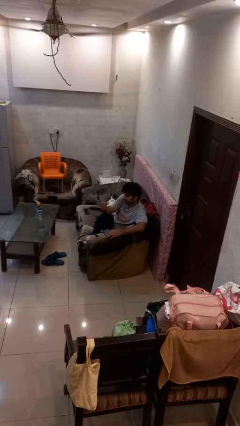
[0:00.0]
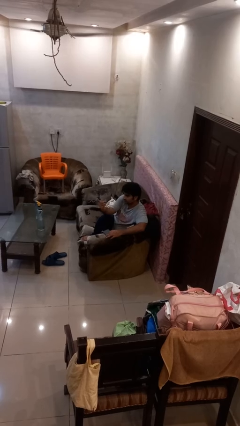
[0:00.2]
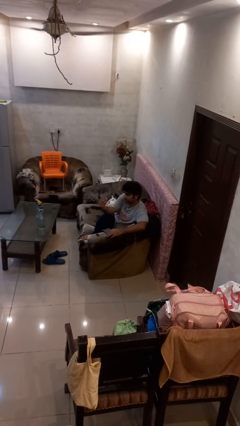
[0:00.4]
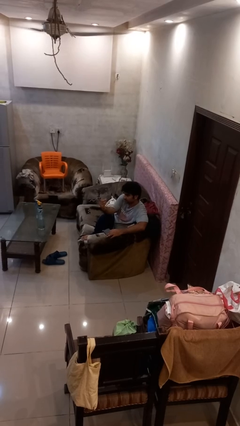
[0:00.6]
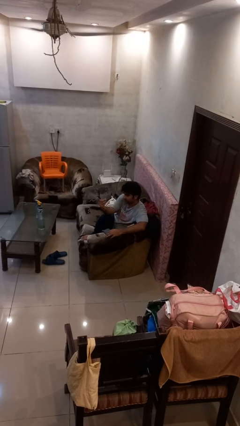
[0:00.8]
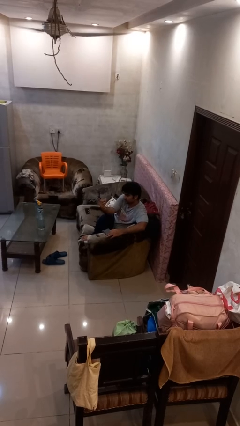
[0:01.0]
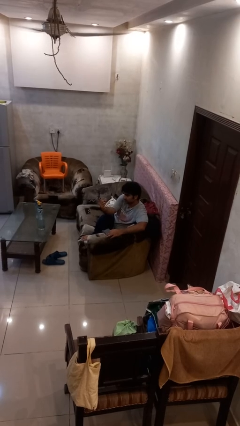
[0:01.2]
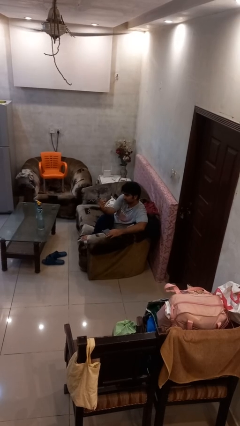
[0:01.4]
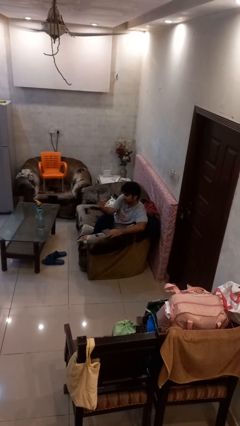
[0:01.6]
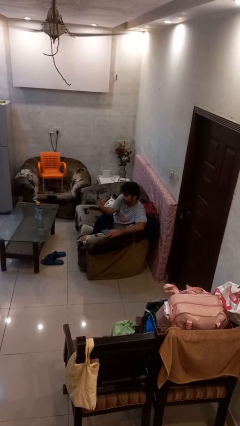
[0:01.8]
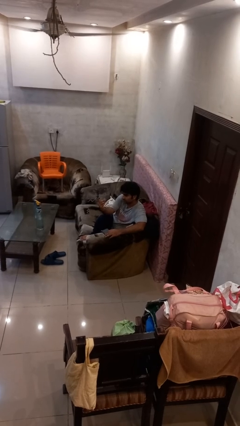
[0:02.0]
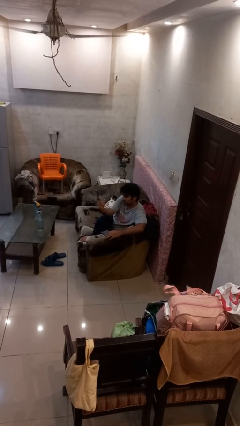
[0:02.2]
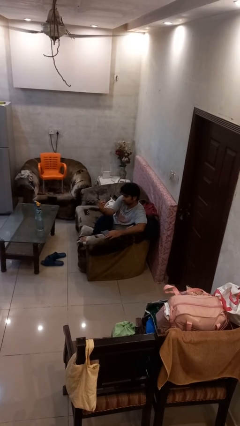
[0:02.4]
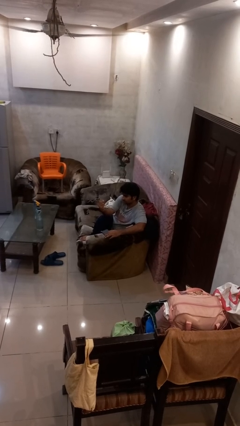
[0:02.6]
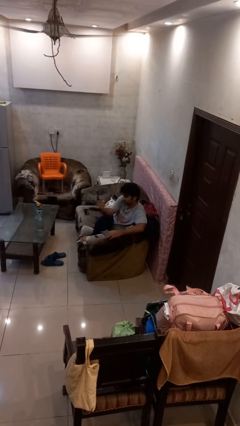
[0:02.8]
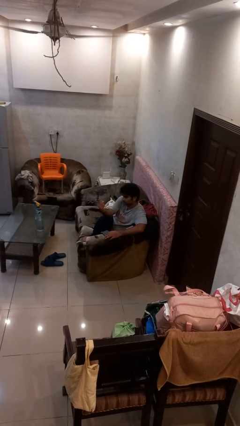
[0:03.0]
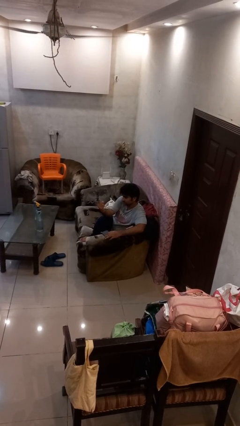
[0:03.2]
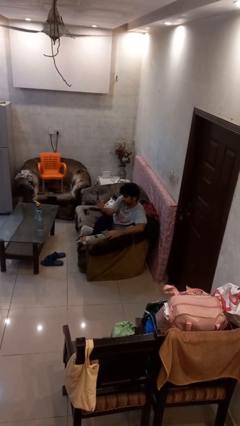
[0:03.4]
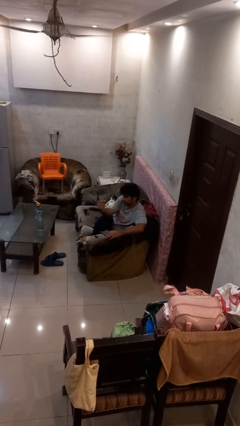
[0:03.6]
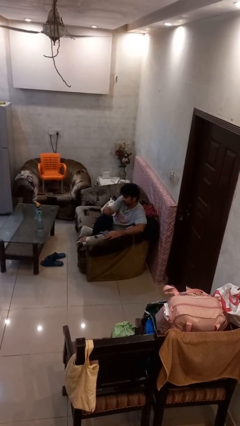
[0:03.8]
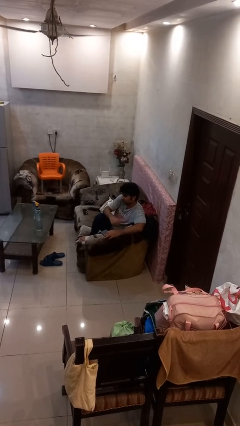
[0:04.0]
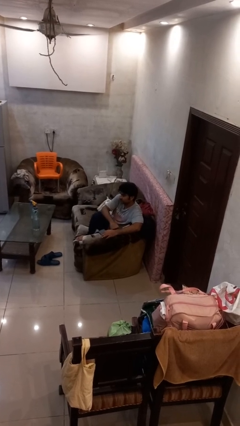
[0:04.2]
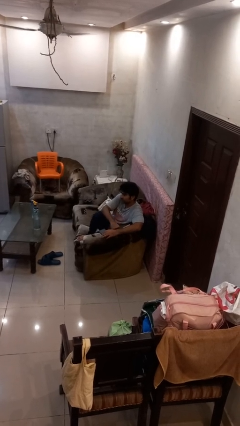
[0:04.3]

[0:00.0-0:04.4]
person gestures come here

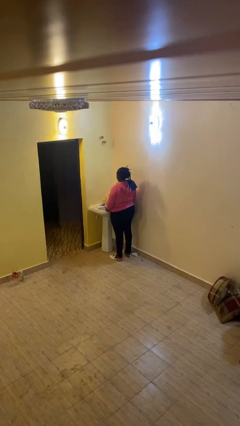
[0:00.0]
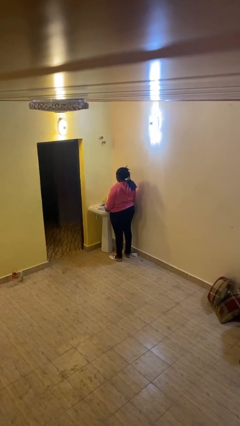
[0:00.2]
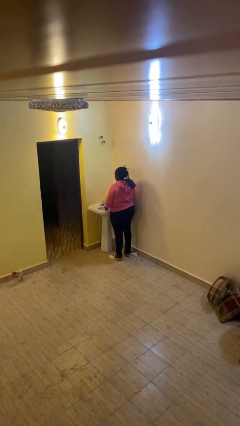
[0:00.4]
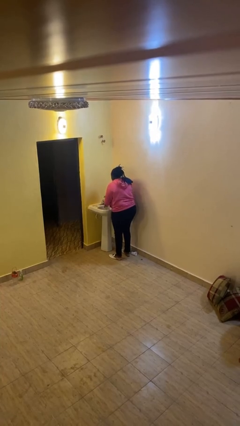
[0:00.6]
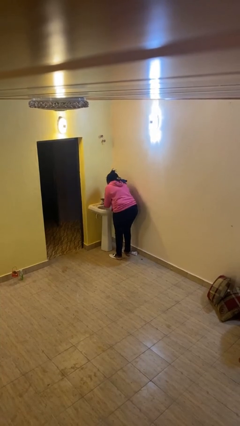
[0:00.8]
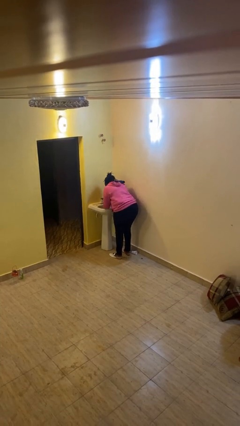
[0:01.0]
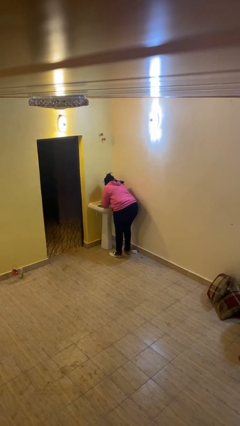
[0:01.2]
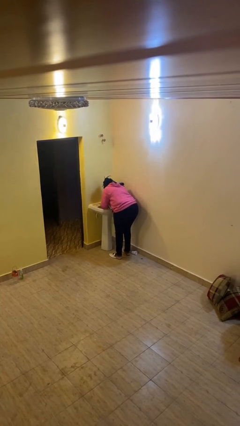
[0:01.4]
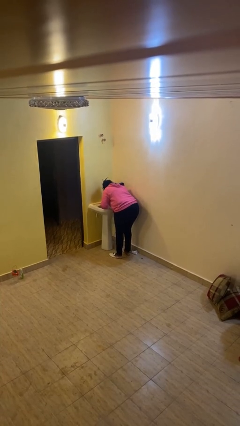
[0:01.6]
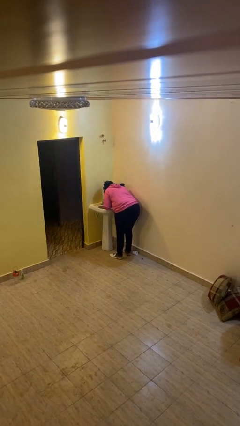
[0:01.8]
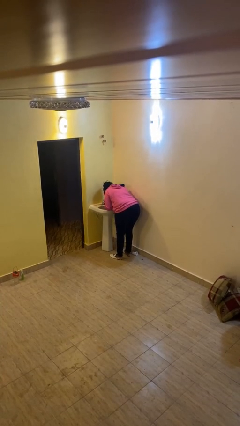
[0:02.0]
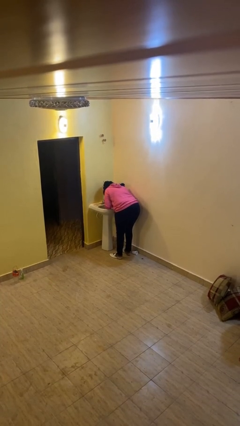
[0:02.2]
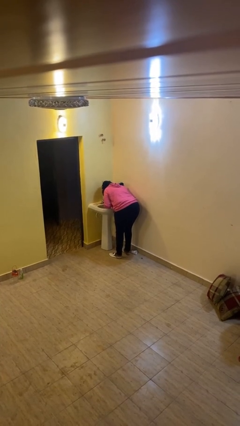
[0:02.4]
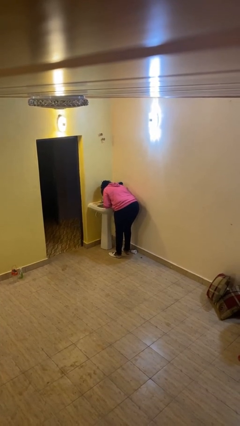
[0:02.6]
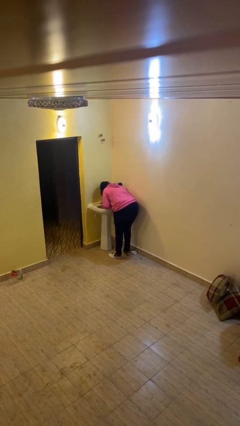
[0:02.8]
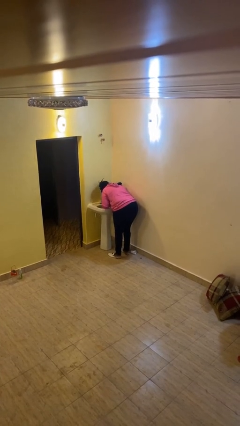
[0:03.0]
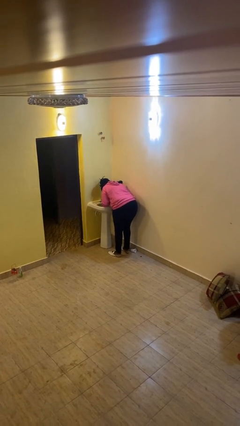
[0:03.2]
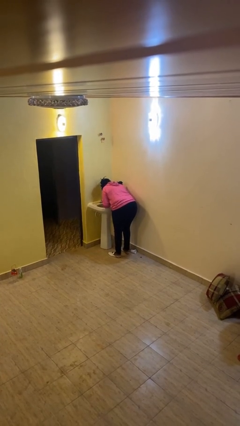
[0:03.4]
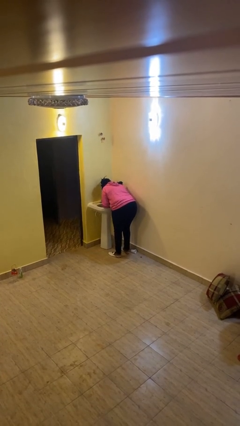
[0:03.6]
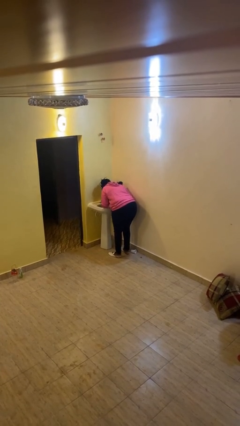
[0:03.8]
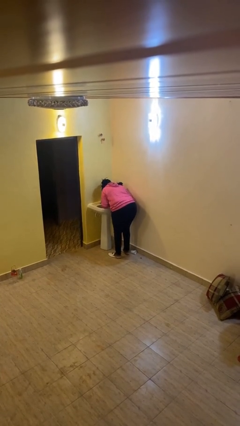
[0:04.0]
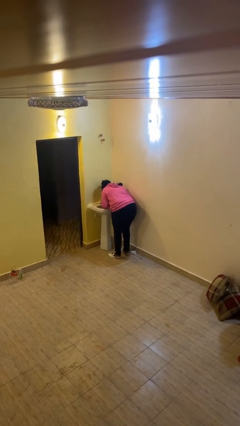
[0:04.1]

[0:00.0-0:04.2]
person washes face

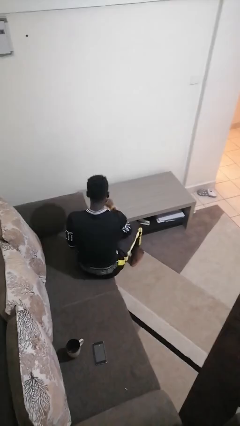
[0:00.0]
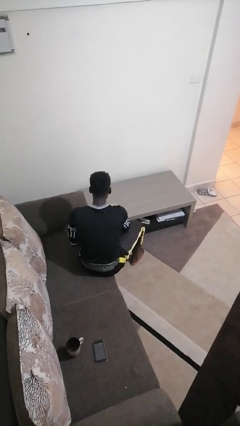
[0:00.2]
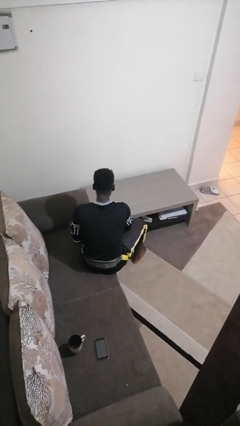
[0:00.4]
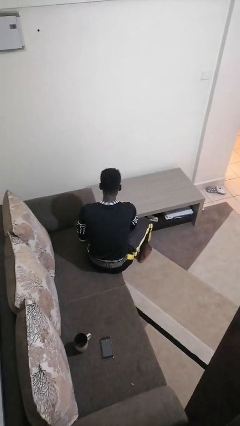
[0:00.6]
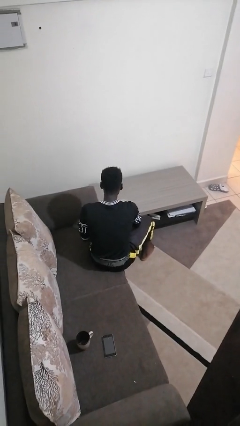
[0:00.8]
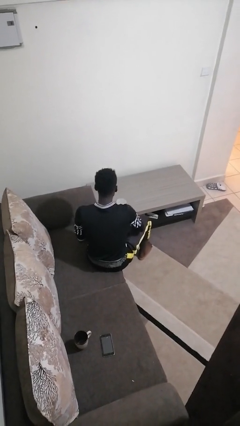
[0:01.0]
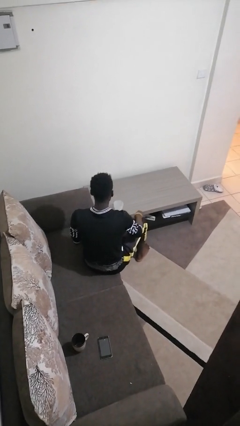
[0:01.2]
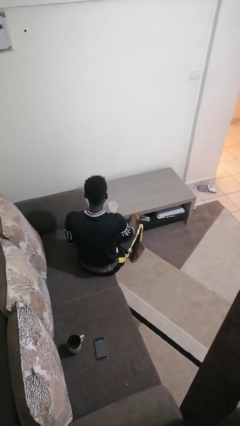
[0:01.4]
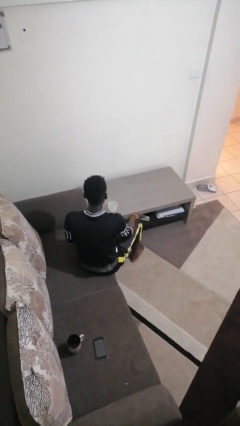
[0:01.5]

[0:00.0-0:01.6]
person puts down object on table

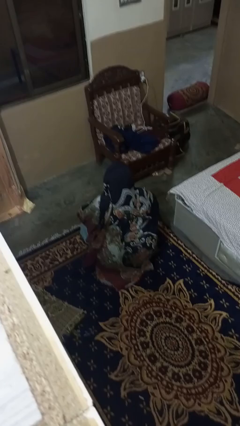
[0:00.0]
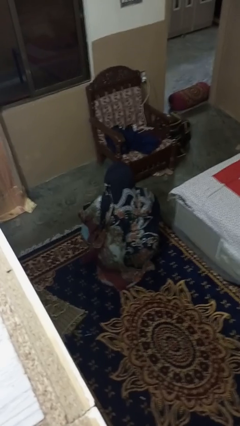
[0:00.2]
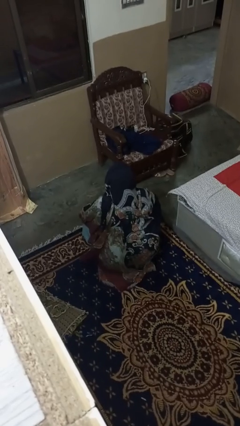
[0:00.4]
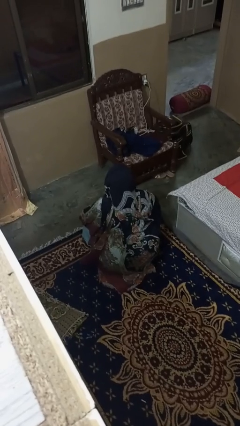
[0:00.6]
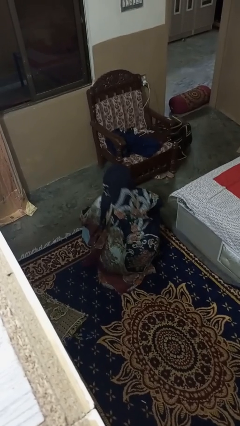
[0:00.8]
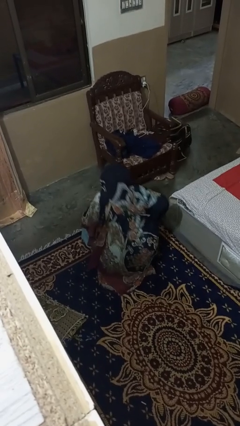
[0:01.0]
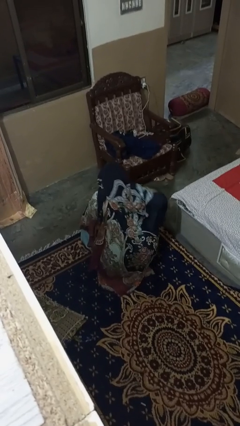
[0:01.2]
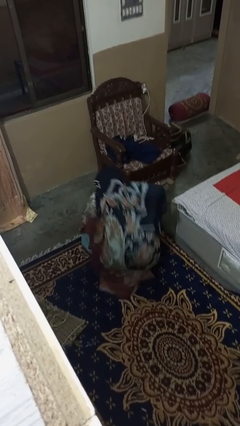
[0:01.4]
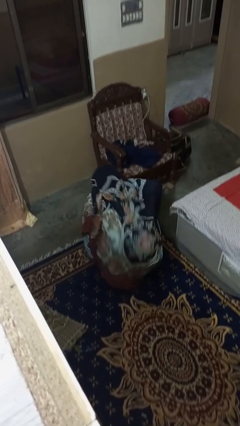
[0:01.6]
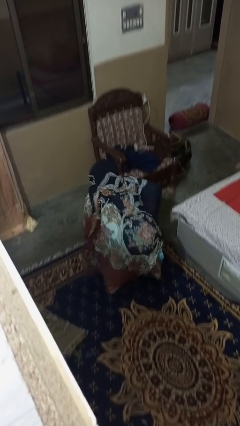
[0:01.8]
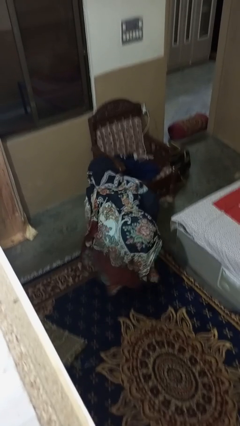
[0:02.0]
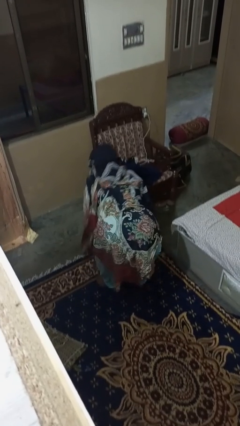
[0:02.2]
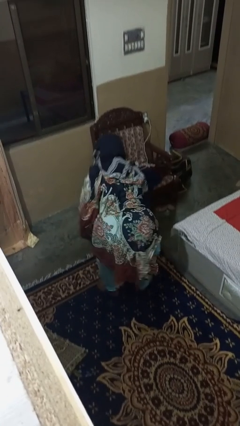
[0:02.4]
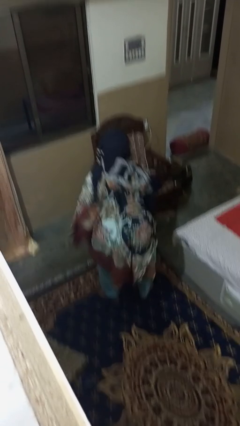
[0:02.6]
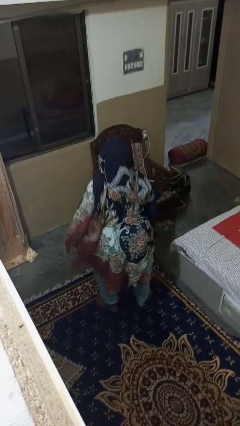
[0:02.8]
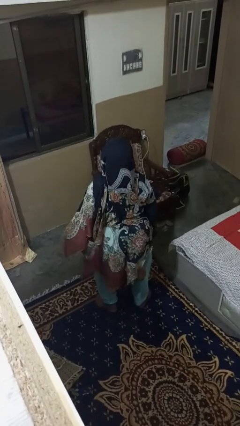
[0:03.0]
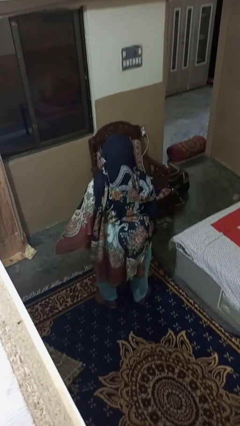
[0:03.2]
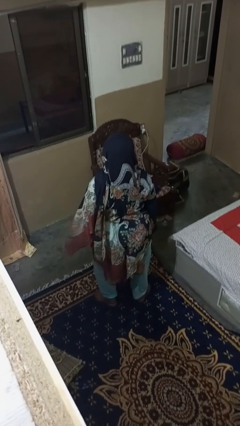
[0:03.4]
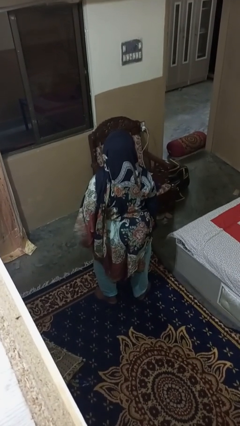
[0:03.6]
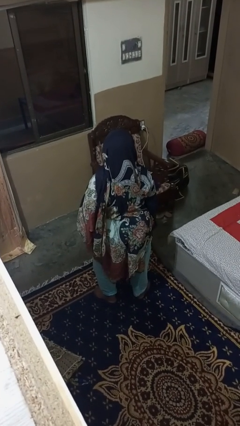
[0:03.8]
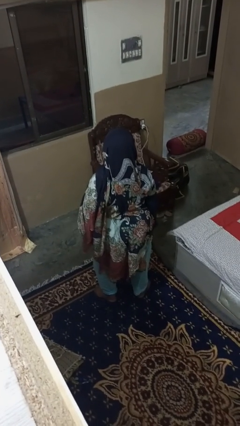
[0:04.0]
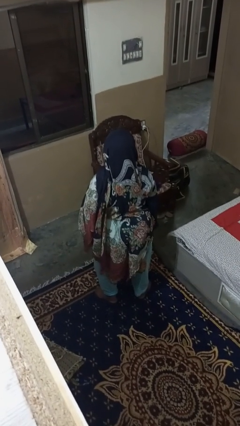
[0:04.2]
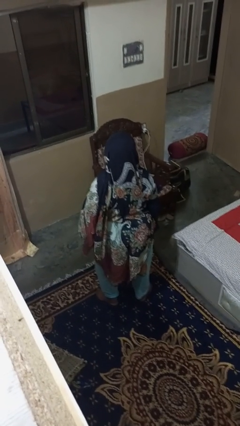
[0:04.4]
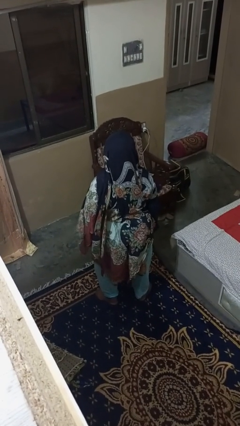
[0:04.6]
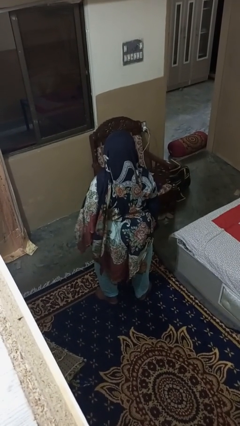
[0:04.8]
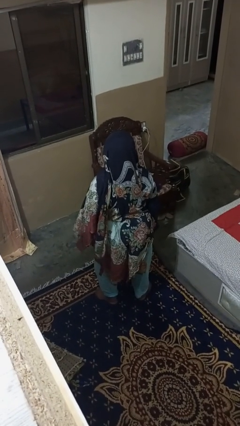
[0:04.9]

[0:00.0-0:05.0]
person stands up

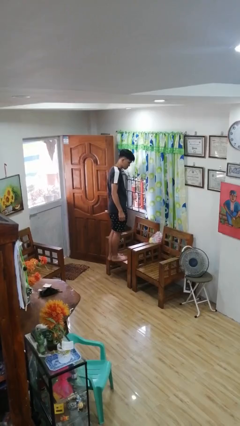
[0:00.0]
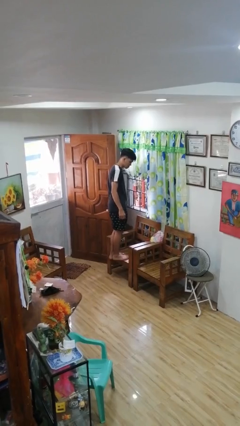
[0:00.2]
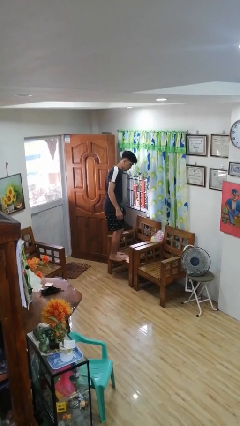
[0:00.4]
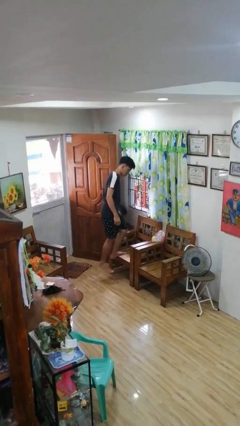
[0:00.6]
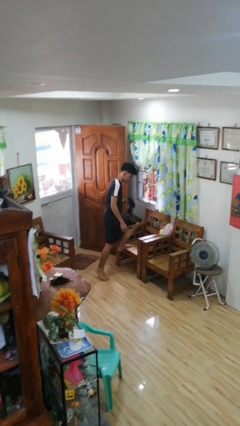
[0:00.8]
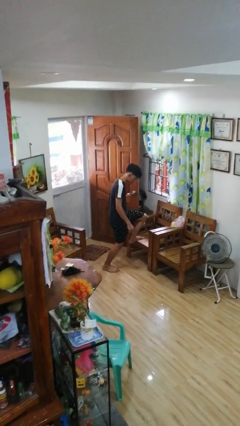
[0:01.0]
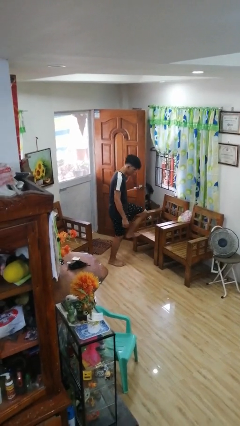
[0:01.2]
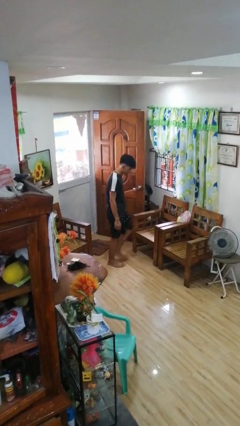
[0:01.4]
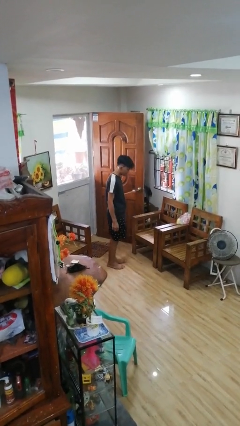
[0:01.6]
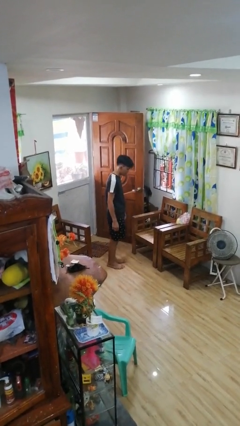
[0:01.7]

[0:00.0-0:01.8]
person climbs off chair

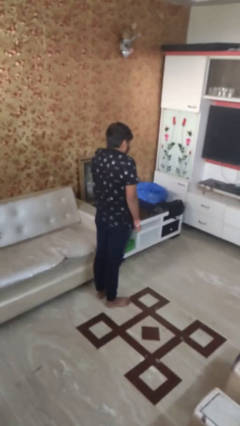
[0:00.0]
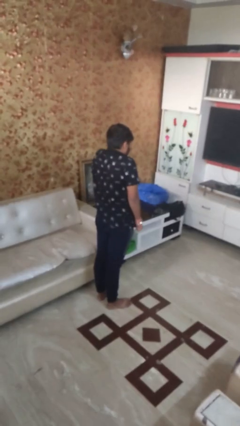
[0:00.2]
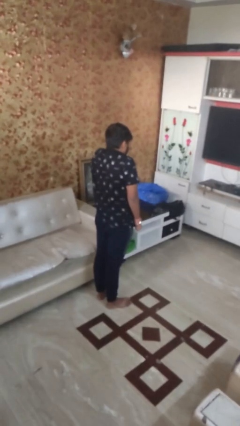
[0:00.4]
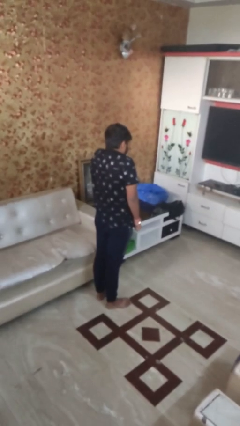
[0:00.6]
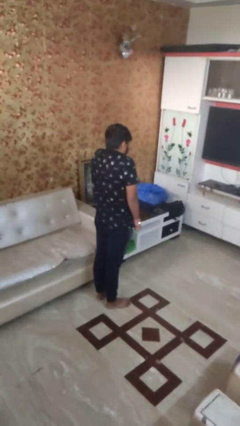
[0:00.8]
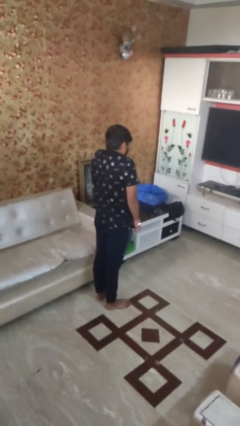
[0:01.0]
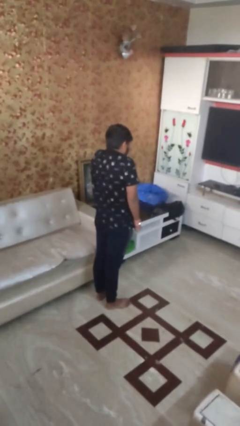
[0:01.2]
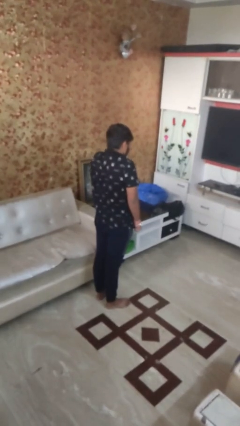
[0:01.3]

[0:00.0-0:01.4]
person shrugs
